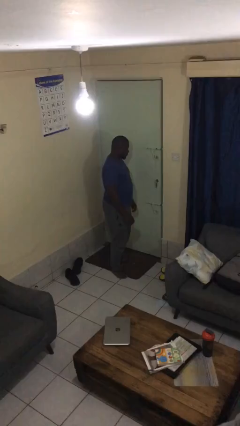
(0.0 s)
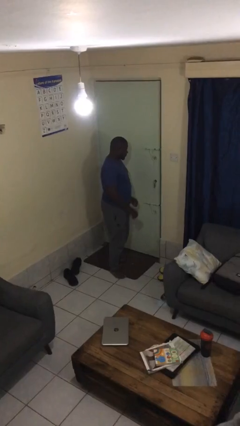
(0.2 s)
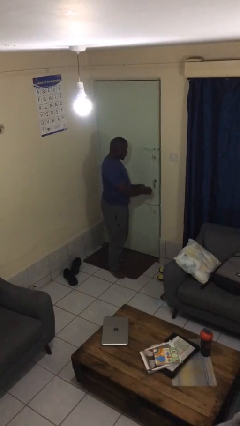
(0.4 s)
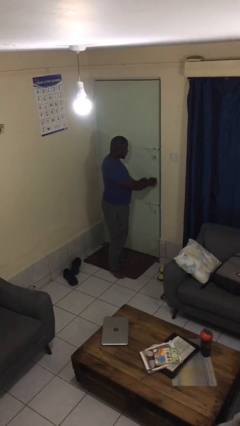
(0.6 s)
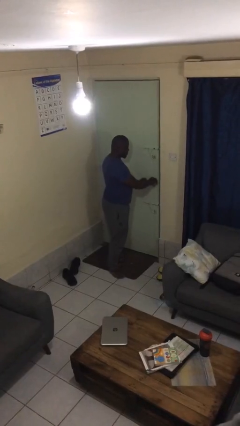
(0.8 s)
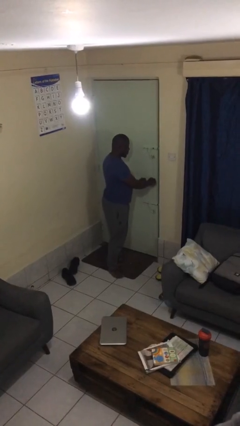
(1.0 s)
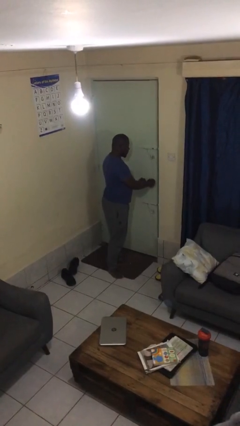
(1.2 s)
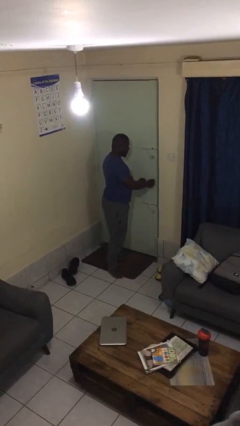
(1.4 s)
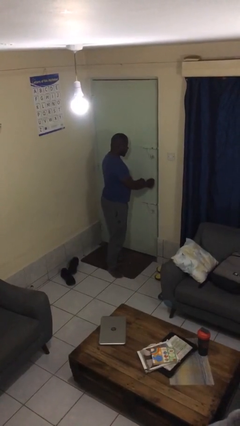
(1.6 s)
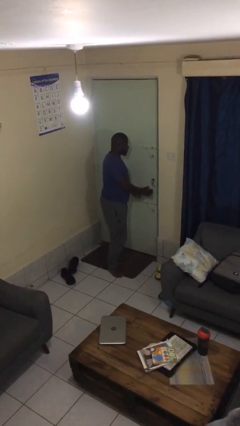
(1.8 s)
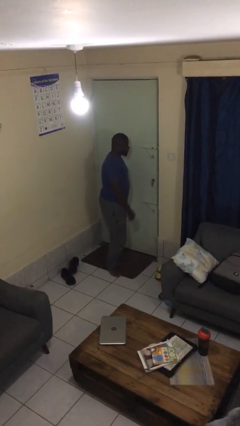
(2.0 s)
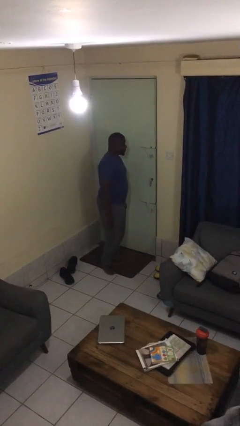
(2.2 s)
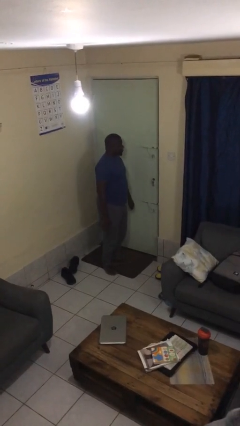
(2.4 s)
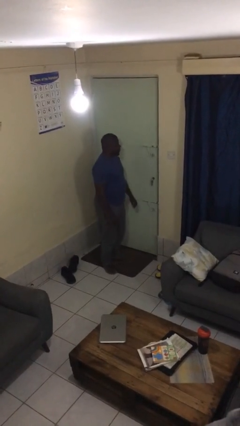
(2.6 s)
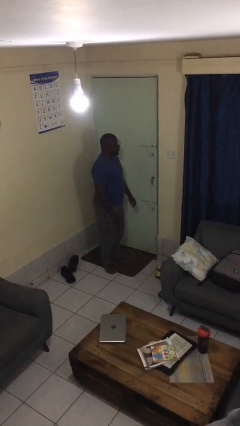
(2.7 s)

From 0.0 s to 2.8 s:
person locks door with keys

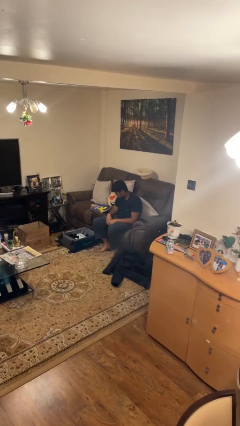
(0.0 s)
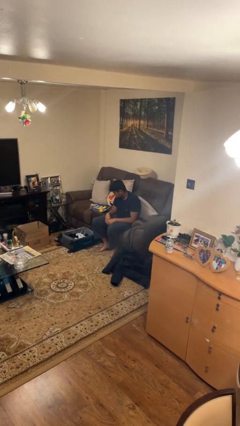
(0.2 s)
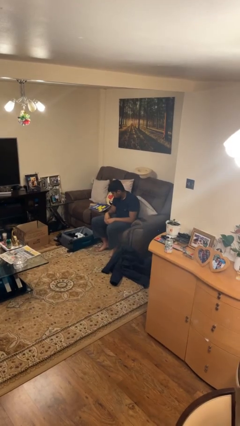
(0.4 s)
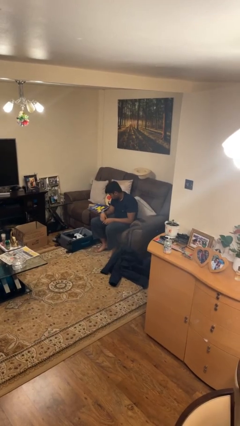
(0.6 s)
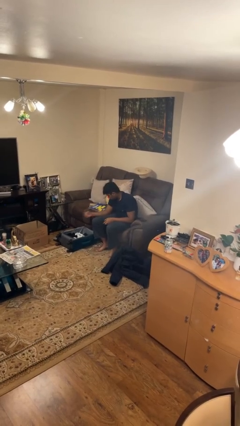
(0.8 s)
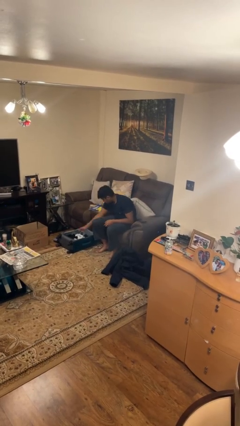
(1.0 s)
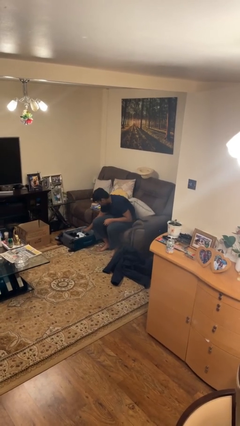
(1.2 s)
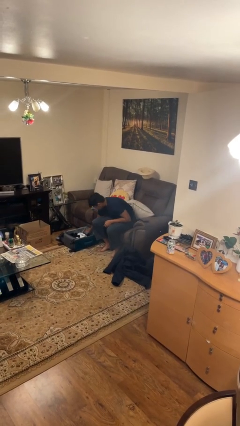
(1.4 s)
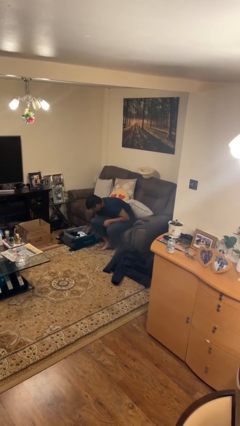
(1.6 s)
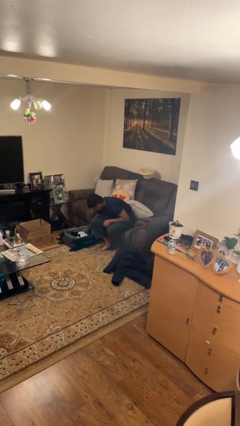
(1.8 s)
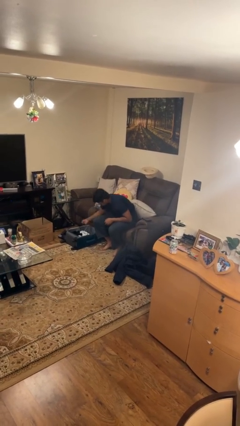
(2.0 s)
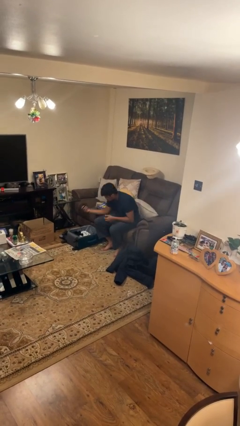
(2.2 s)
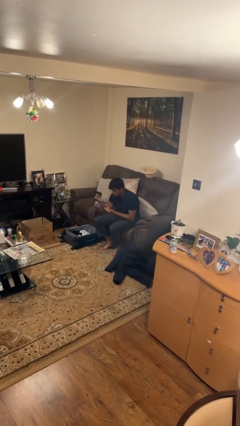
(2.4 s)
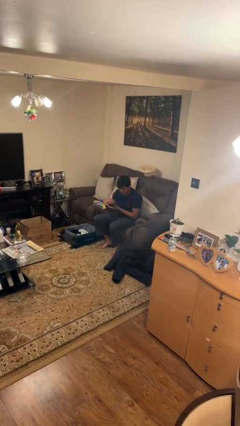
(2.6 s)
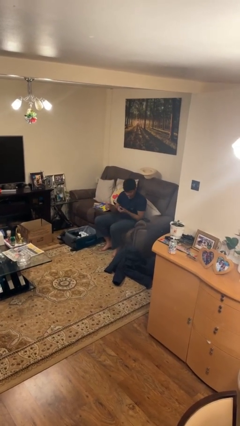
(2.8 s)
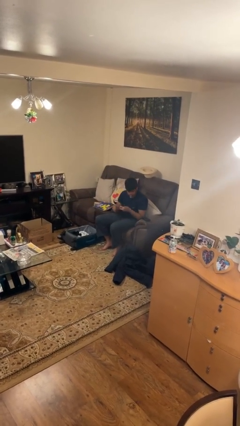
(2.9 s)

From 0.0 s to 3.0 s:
person unloads clothes from suitcase

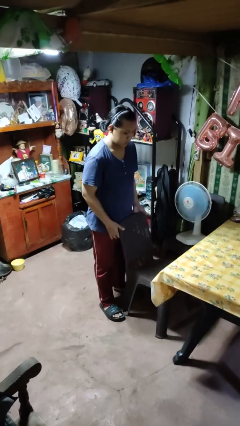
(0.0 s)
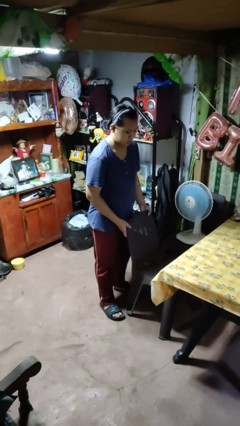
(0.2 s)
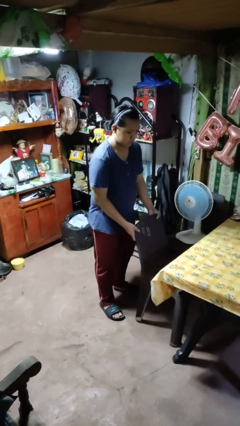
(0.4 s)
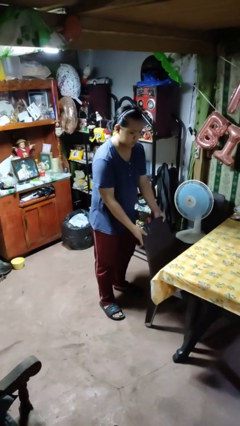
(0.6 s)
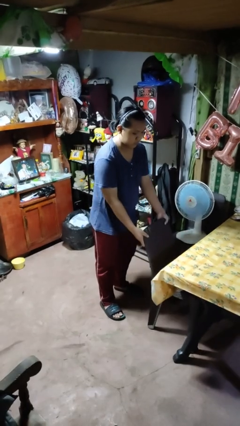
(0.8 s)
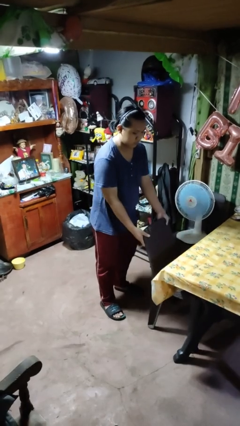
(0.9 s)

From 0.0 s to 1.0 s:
person pushes in chair

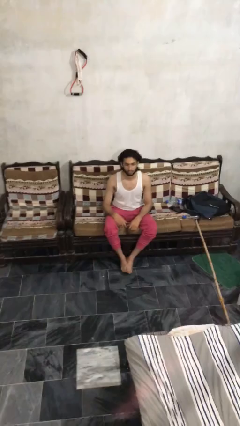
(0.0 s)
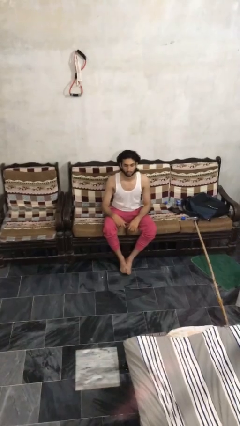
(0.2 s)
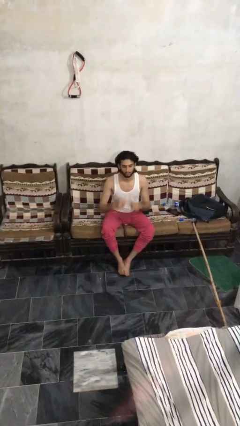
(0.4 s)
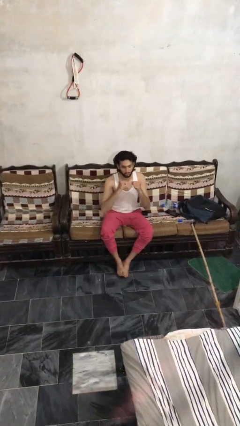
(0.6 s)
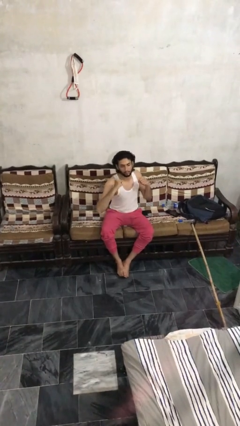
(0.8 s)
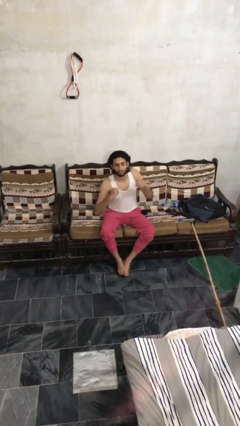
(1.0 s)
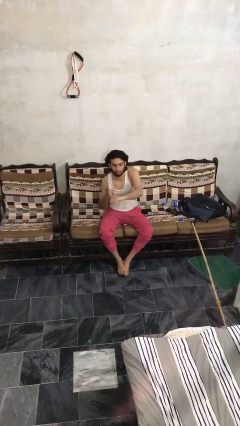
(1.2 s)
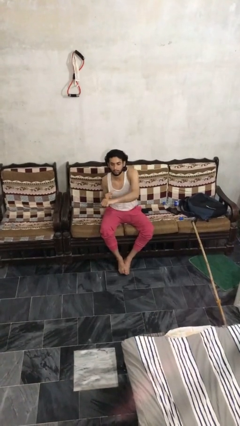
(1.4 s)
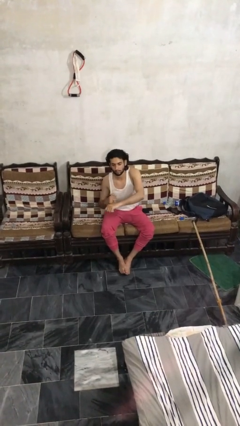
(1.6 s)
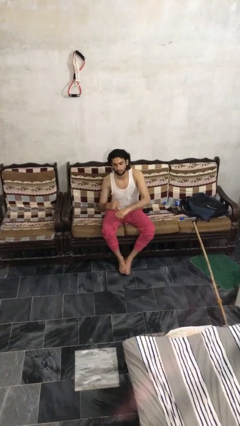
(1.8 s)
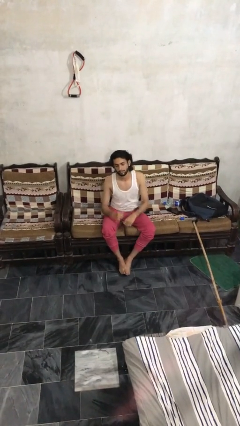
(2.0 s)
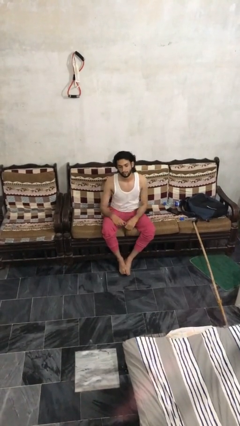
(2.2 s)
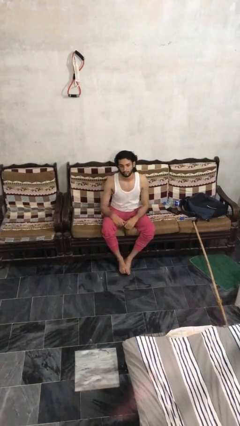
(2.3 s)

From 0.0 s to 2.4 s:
person punches

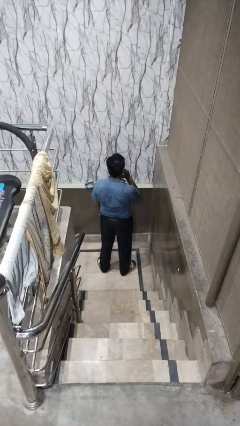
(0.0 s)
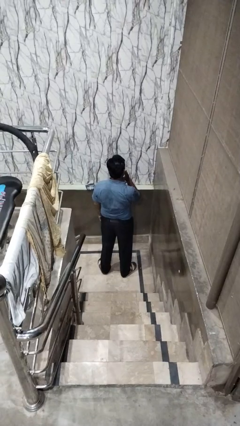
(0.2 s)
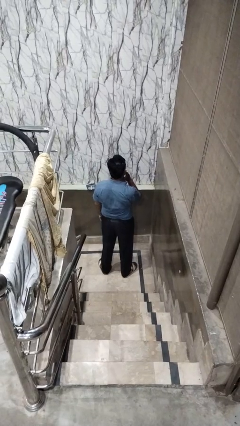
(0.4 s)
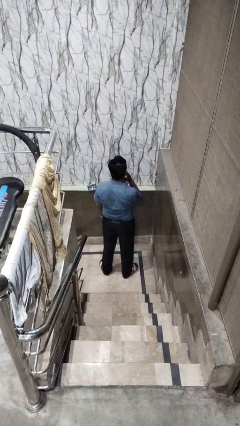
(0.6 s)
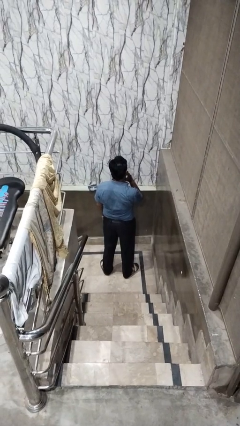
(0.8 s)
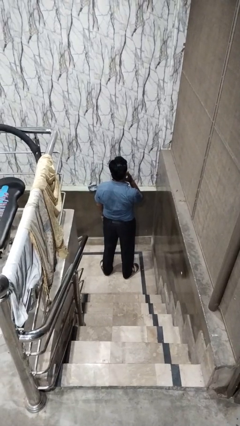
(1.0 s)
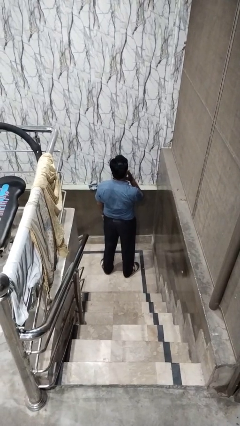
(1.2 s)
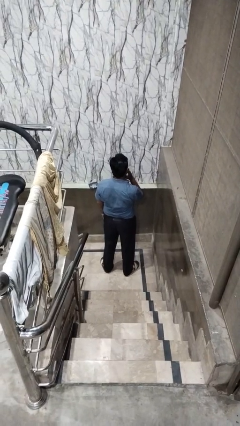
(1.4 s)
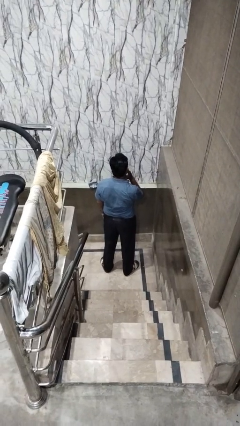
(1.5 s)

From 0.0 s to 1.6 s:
person strokes chin

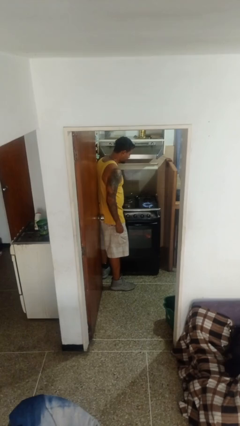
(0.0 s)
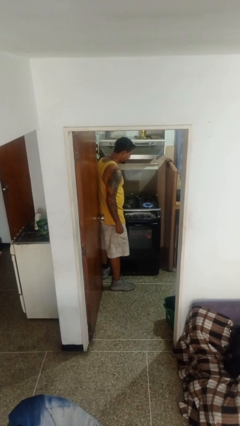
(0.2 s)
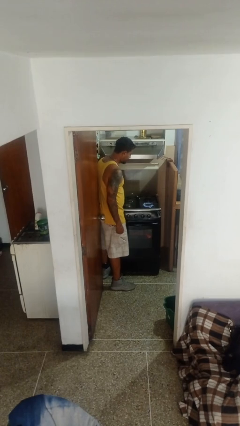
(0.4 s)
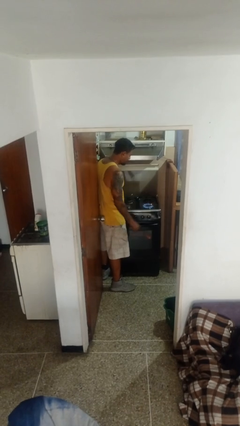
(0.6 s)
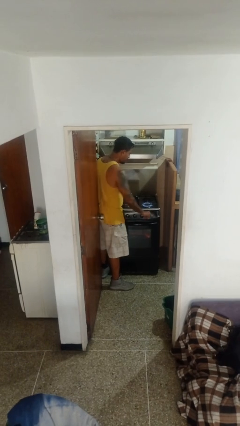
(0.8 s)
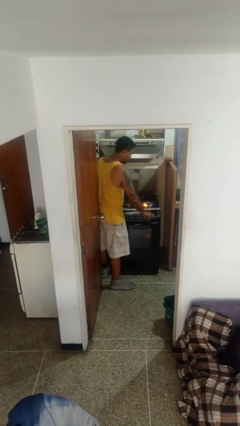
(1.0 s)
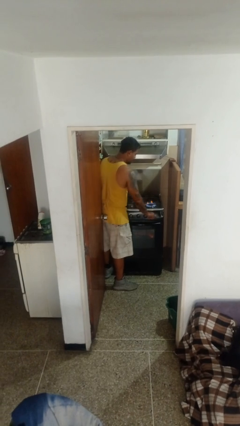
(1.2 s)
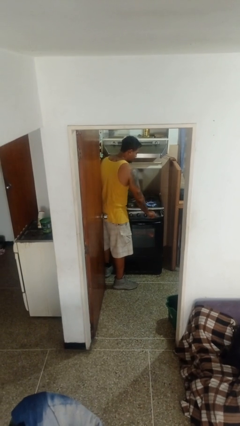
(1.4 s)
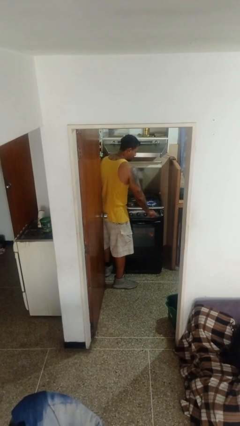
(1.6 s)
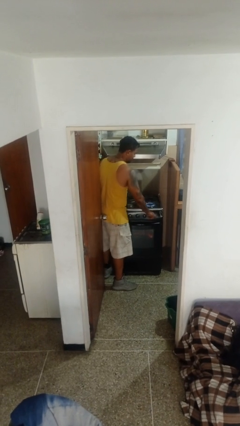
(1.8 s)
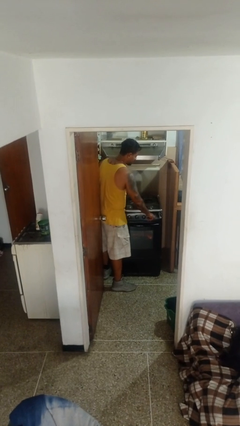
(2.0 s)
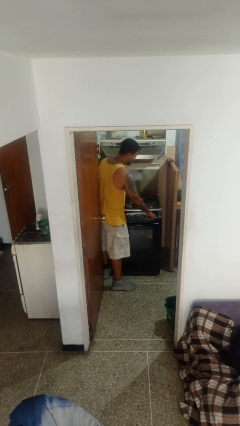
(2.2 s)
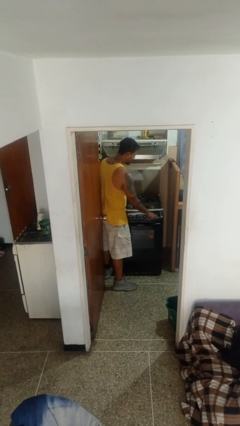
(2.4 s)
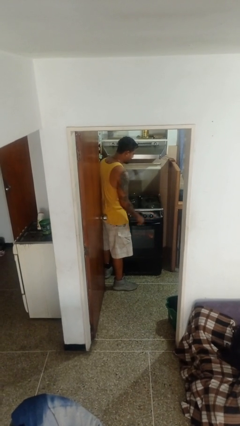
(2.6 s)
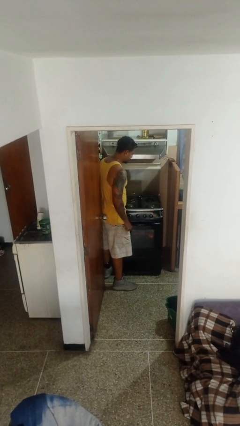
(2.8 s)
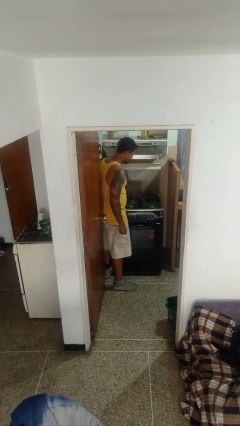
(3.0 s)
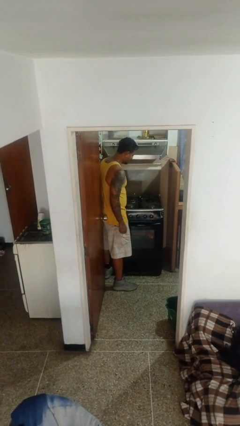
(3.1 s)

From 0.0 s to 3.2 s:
person turns off stovetop

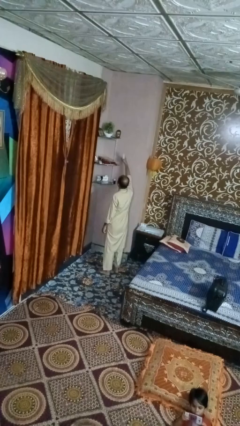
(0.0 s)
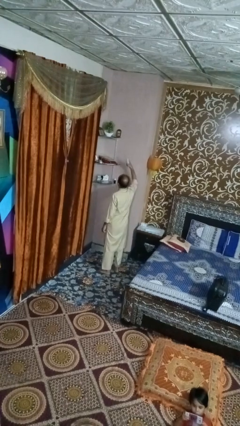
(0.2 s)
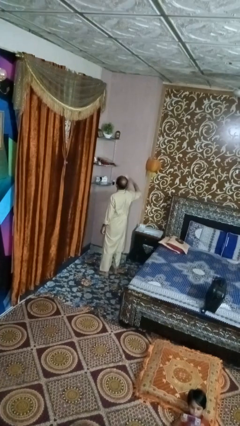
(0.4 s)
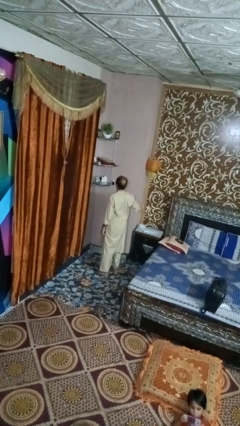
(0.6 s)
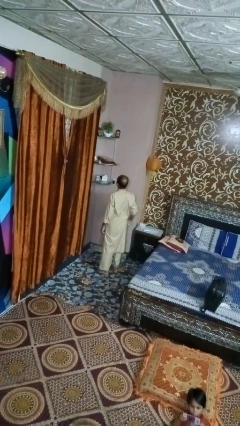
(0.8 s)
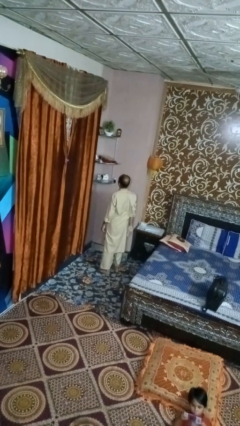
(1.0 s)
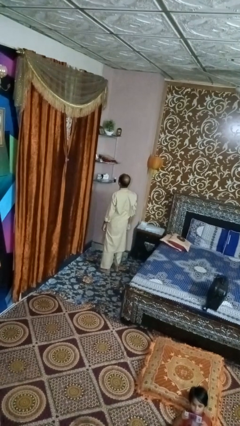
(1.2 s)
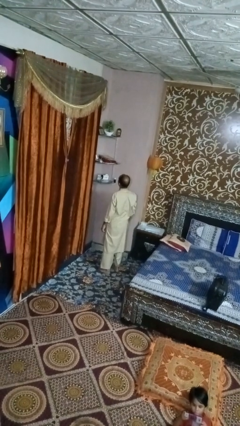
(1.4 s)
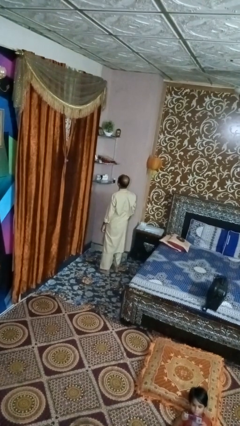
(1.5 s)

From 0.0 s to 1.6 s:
person puts down object on shelf

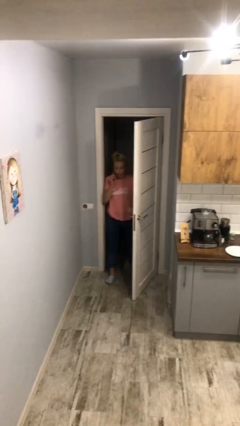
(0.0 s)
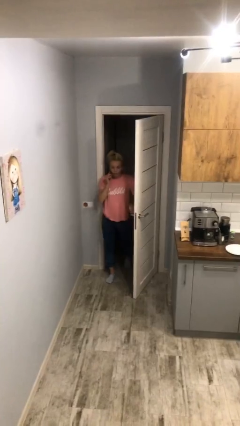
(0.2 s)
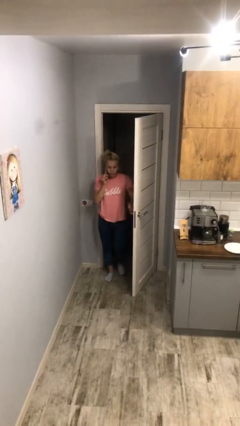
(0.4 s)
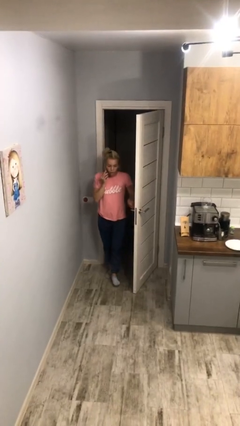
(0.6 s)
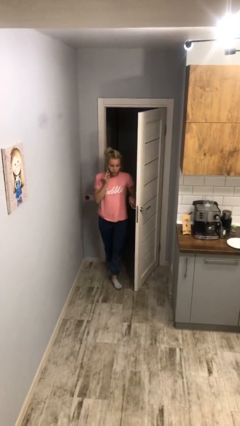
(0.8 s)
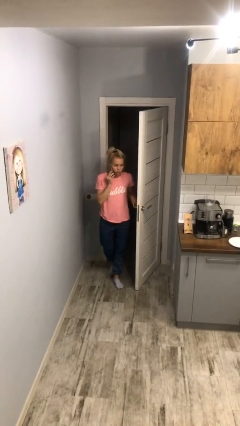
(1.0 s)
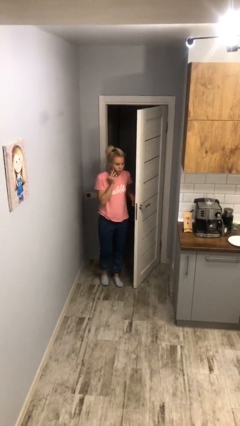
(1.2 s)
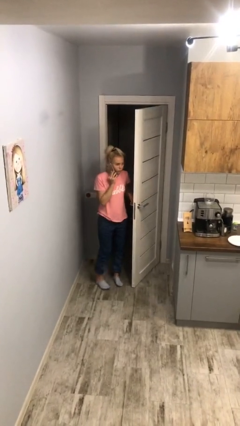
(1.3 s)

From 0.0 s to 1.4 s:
person enters scene through structure
